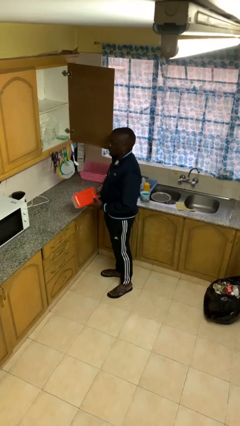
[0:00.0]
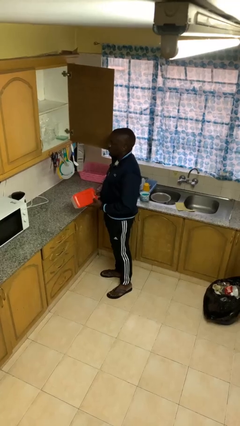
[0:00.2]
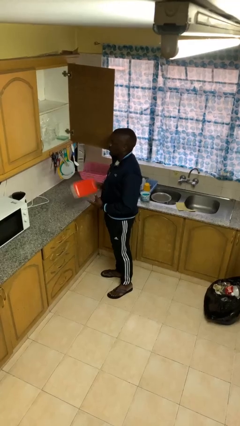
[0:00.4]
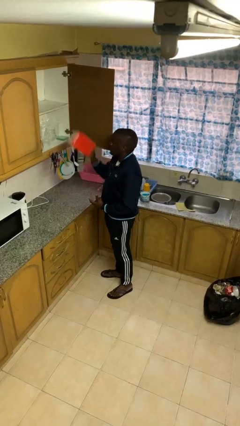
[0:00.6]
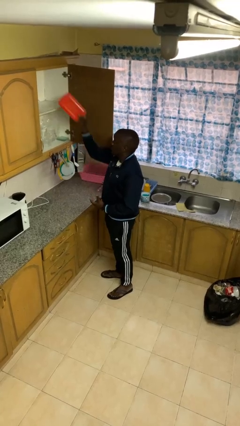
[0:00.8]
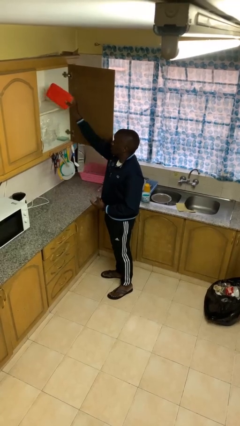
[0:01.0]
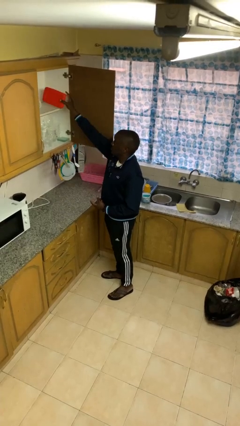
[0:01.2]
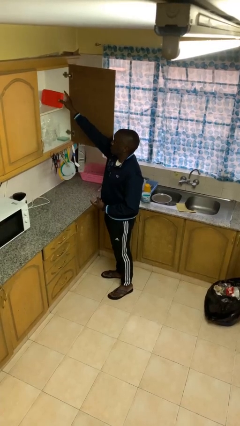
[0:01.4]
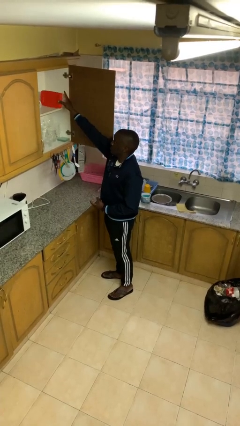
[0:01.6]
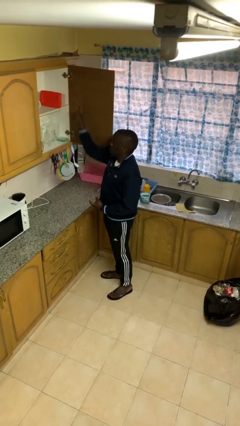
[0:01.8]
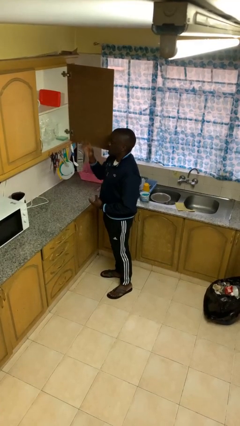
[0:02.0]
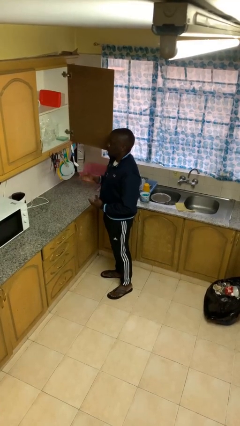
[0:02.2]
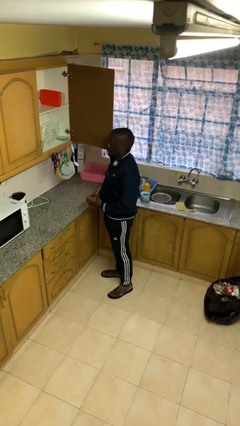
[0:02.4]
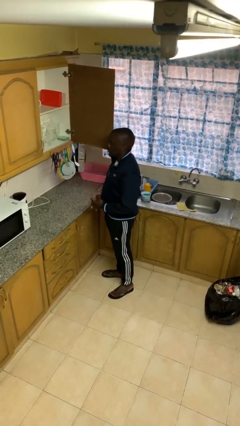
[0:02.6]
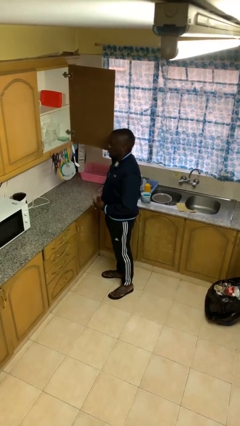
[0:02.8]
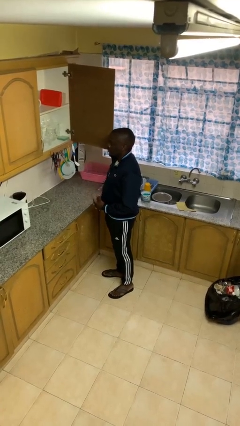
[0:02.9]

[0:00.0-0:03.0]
person puts down object on shelf

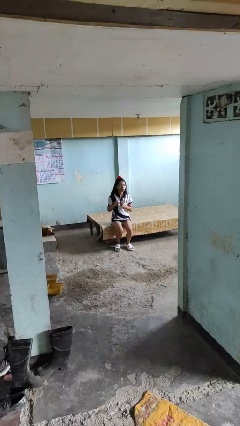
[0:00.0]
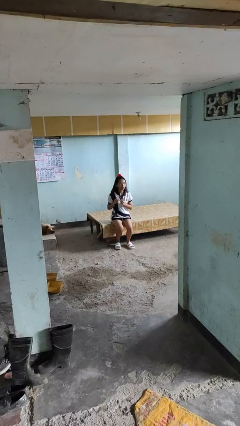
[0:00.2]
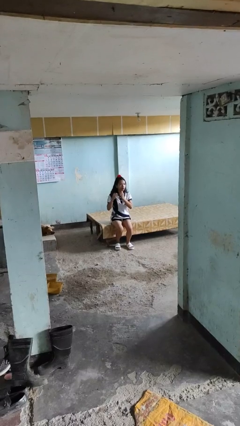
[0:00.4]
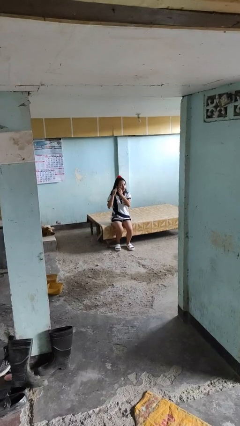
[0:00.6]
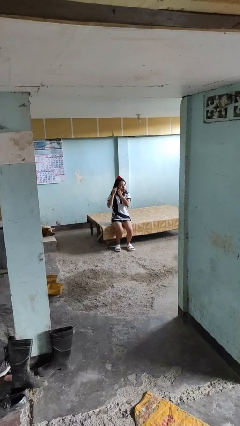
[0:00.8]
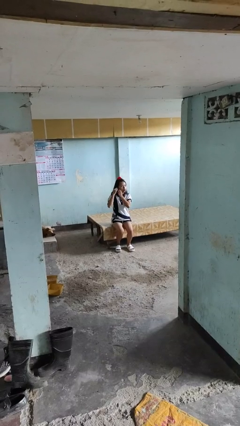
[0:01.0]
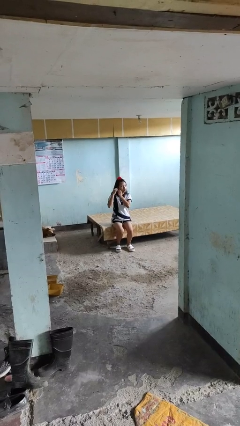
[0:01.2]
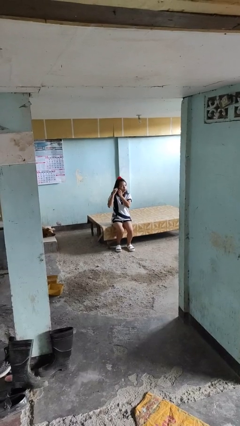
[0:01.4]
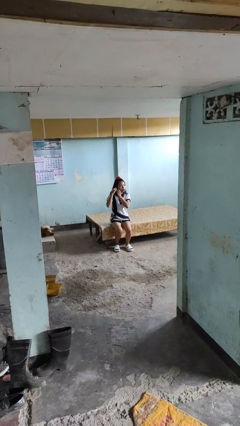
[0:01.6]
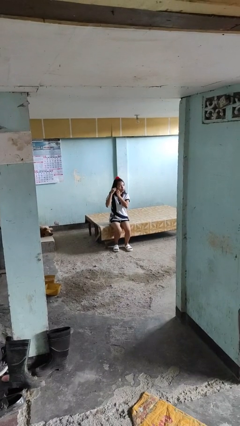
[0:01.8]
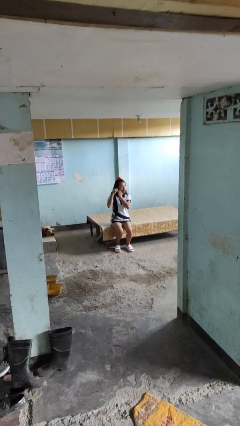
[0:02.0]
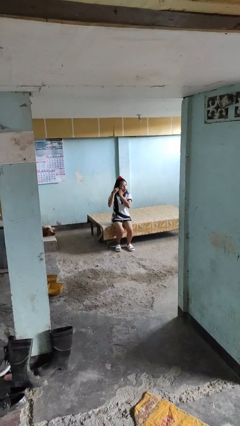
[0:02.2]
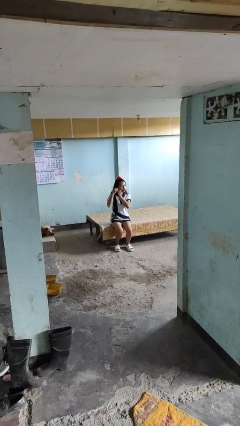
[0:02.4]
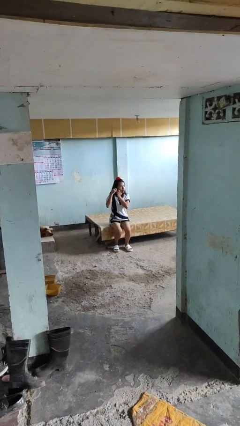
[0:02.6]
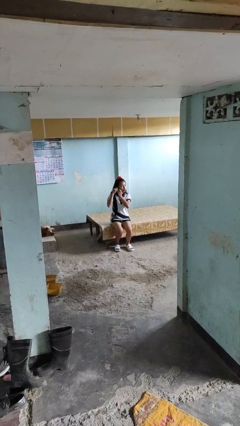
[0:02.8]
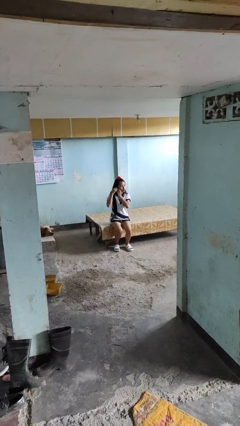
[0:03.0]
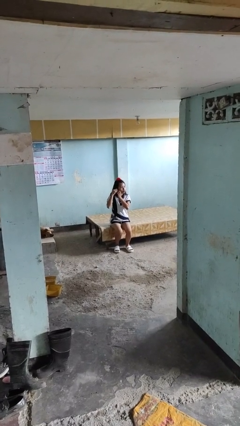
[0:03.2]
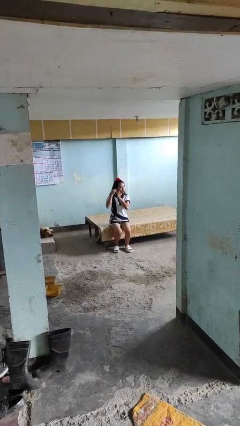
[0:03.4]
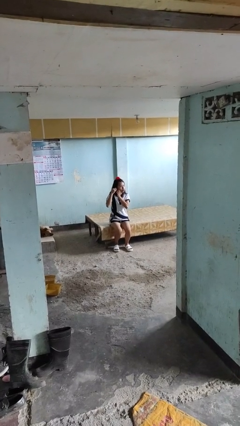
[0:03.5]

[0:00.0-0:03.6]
person puts on earrings

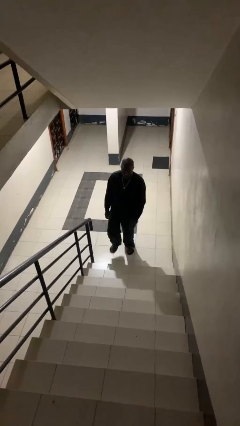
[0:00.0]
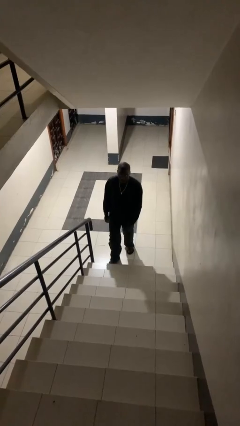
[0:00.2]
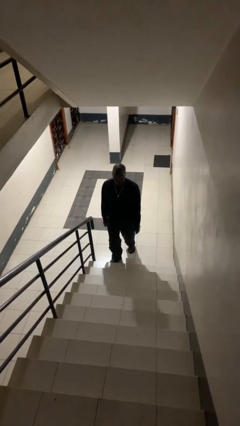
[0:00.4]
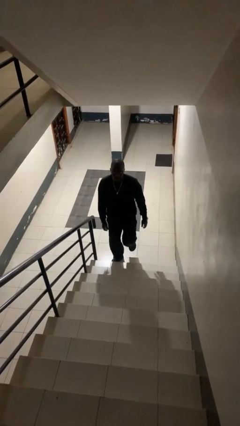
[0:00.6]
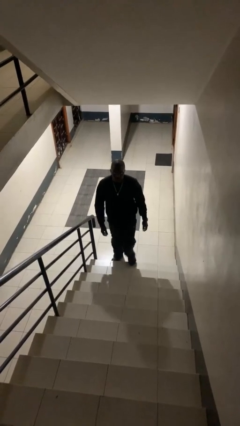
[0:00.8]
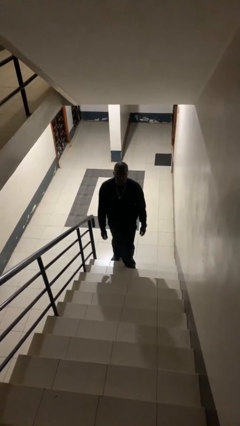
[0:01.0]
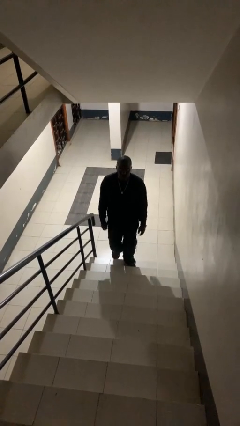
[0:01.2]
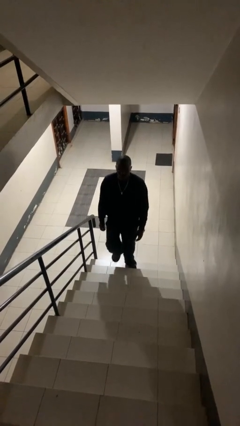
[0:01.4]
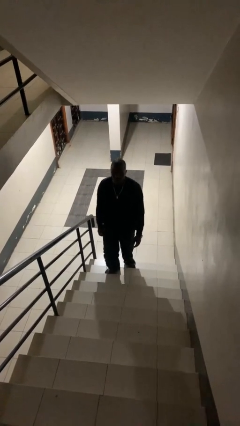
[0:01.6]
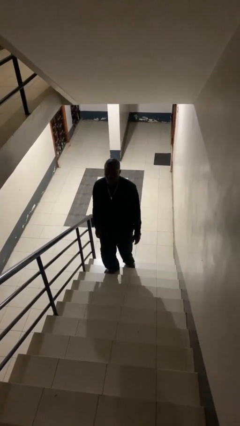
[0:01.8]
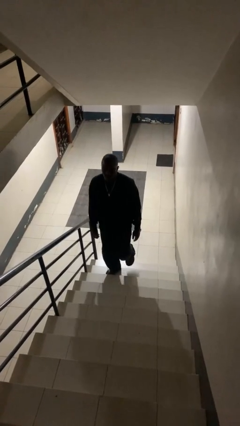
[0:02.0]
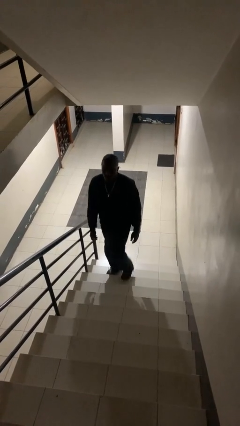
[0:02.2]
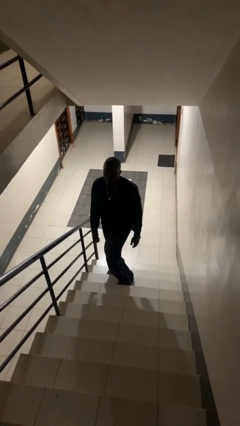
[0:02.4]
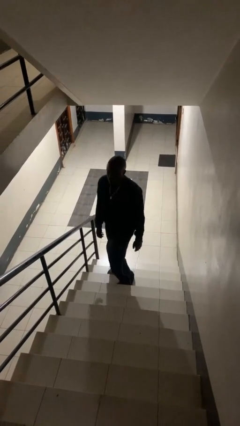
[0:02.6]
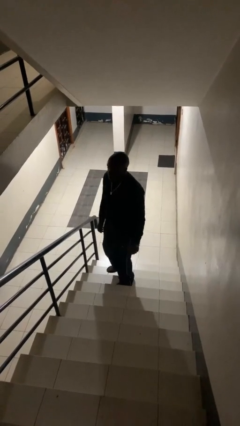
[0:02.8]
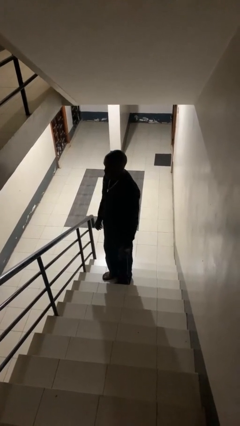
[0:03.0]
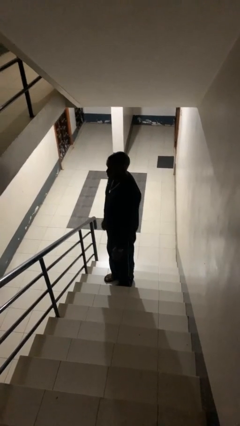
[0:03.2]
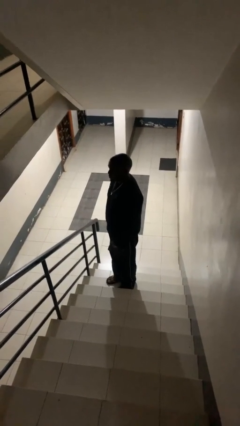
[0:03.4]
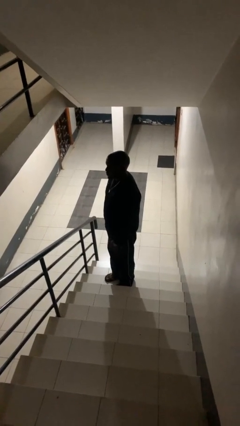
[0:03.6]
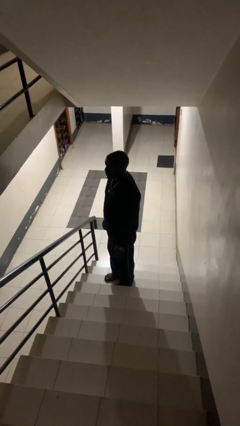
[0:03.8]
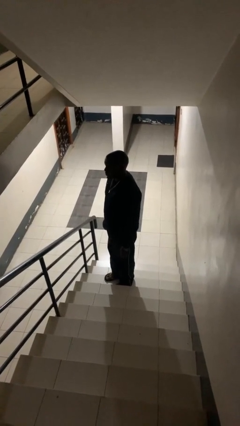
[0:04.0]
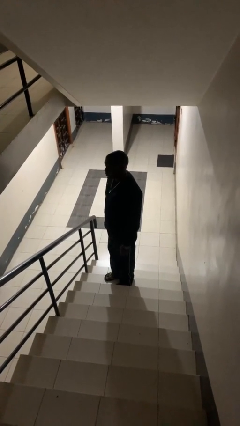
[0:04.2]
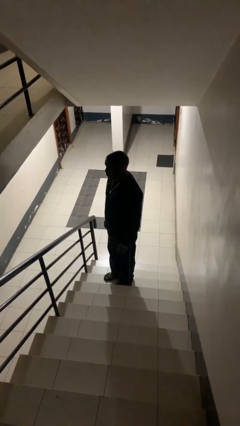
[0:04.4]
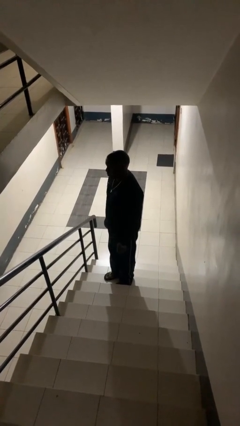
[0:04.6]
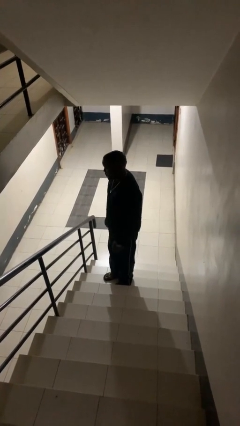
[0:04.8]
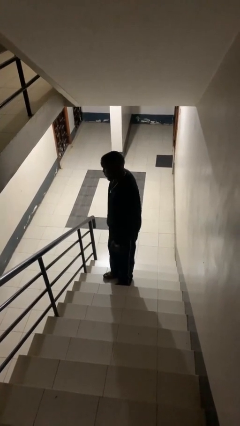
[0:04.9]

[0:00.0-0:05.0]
person climbs up stairs

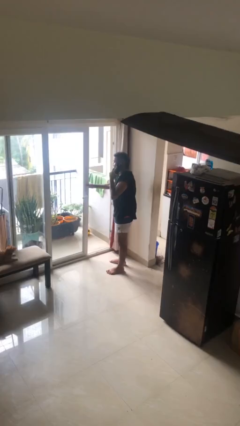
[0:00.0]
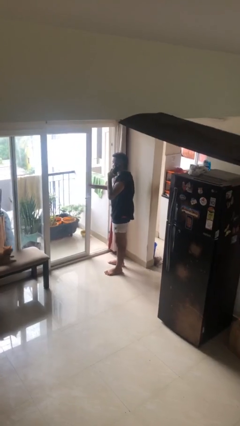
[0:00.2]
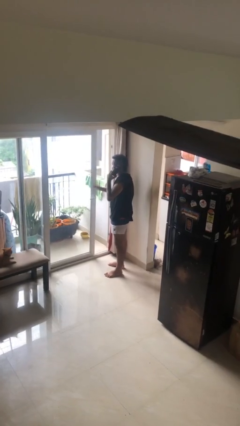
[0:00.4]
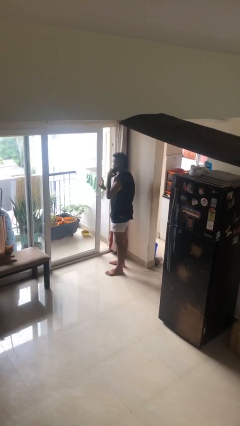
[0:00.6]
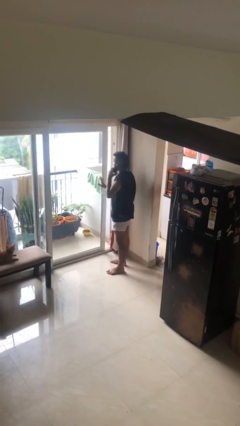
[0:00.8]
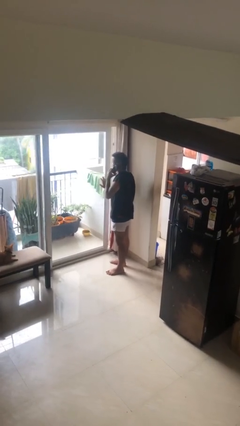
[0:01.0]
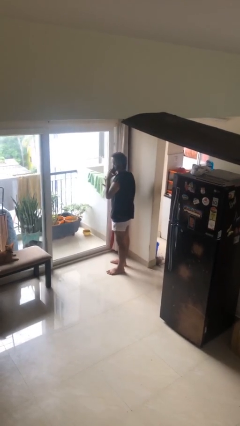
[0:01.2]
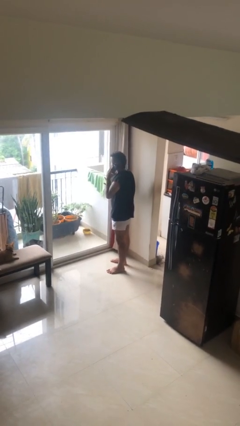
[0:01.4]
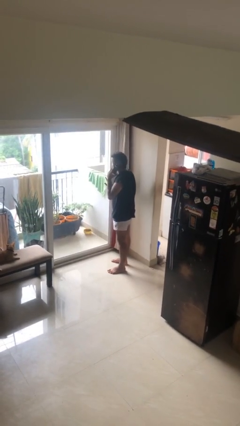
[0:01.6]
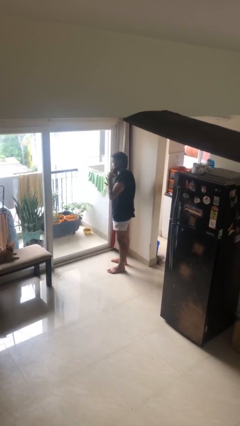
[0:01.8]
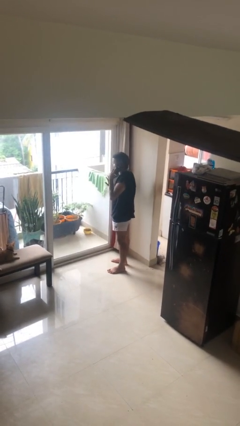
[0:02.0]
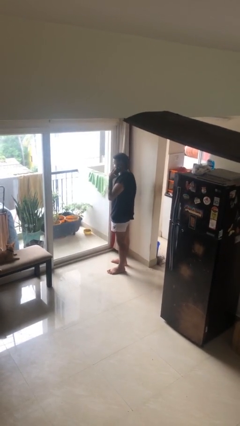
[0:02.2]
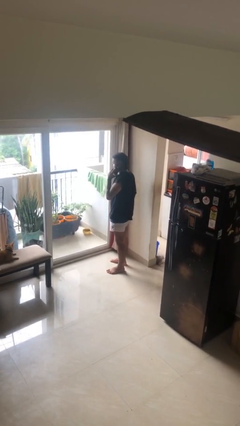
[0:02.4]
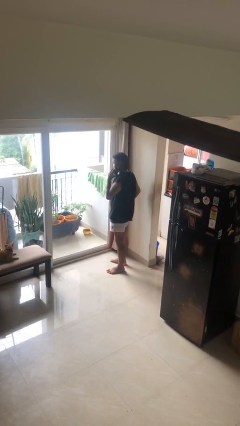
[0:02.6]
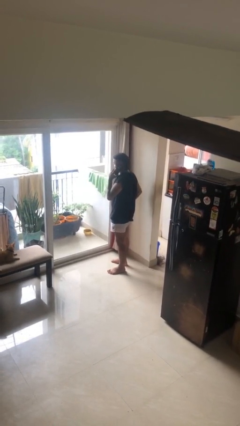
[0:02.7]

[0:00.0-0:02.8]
person closes facility door

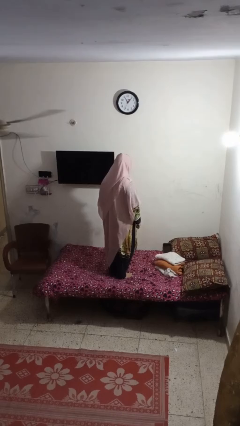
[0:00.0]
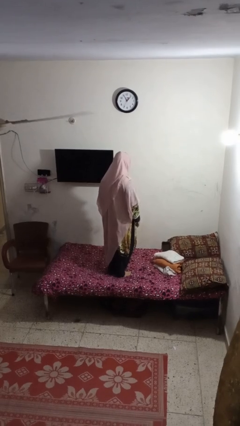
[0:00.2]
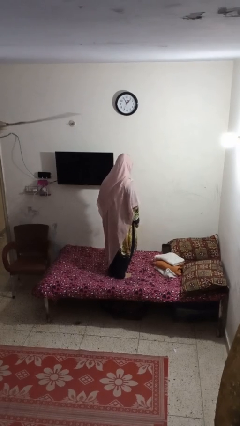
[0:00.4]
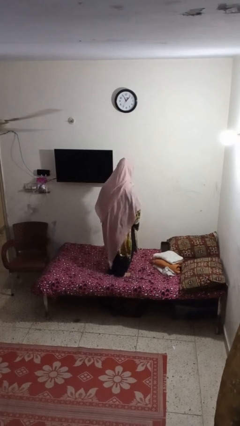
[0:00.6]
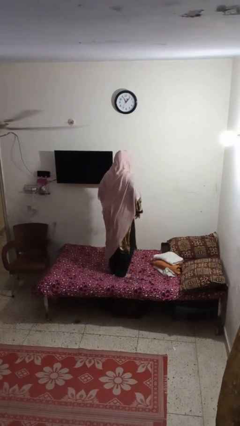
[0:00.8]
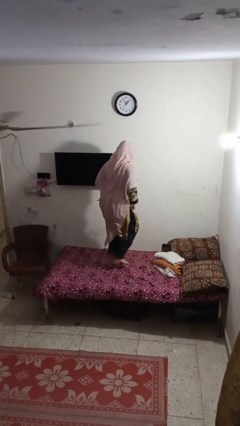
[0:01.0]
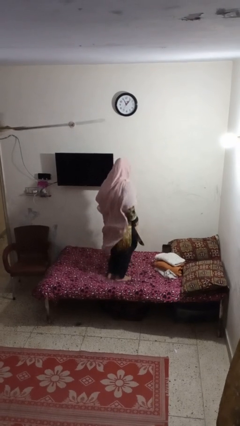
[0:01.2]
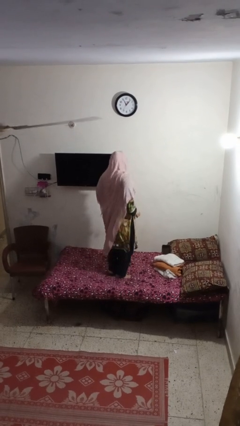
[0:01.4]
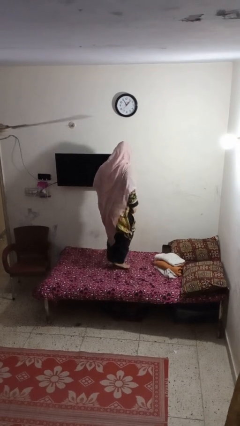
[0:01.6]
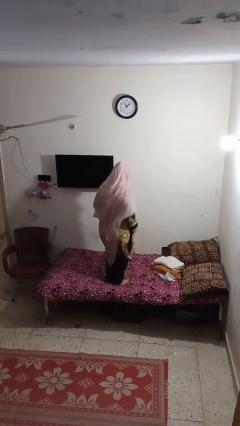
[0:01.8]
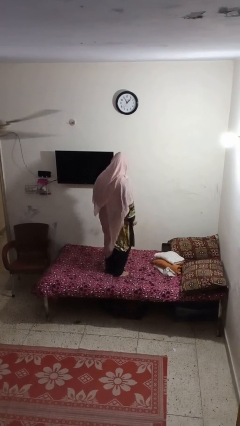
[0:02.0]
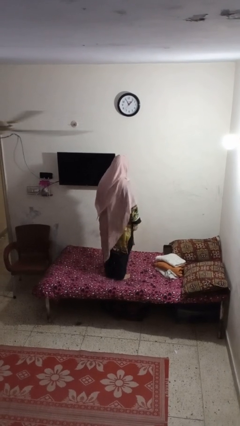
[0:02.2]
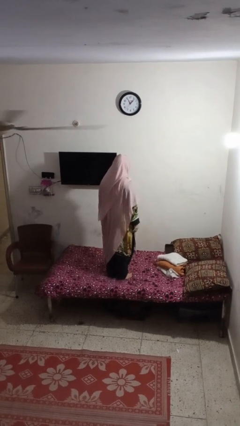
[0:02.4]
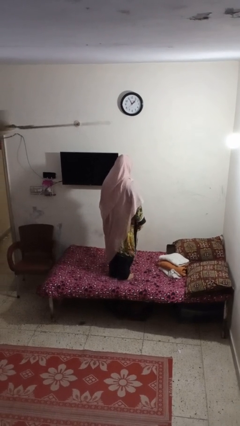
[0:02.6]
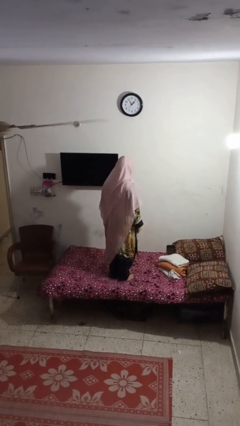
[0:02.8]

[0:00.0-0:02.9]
person jumps on bed

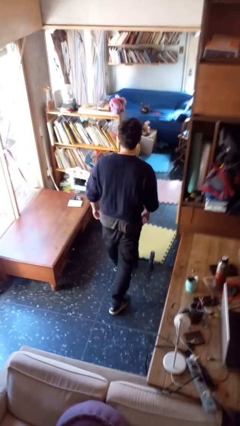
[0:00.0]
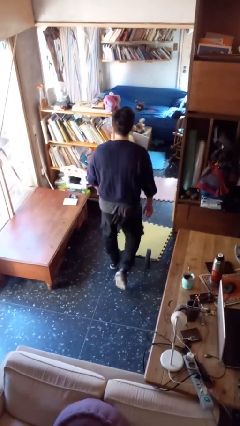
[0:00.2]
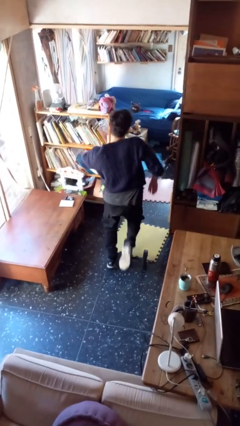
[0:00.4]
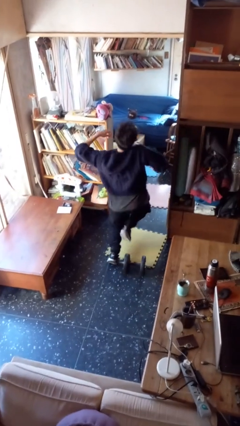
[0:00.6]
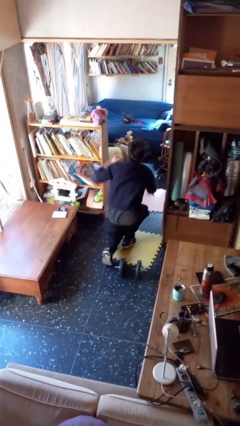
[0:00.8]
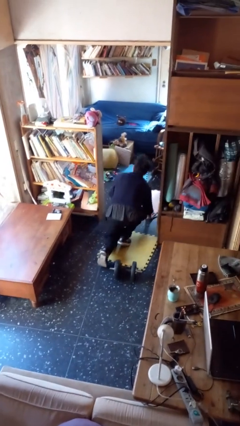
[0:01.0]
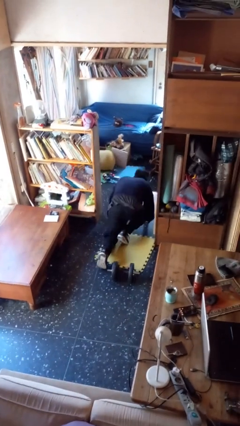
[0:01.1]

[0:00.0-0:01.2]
person trips on object on floor
